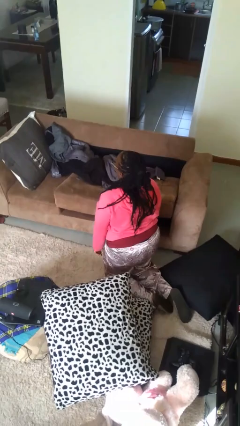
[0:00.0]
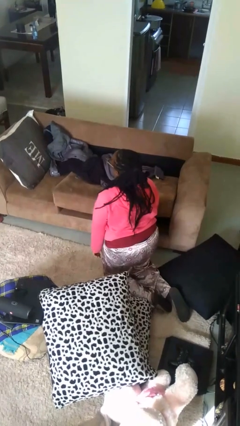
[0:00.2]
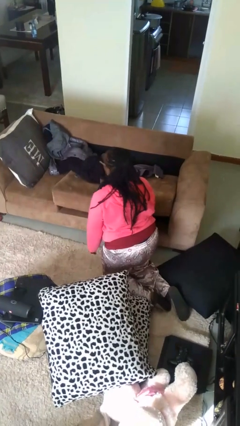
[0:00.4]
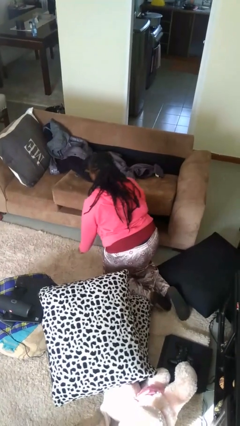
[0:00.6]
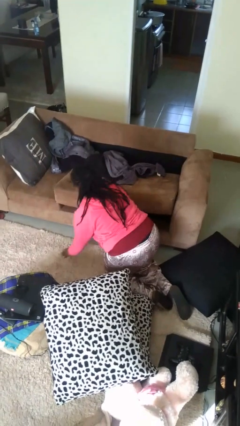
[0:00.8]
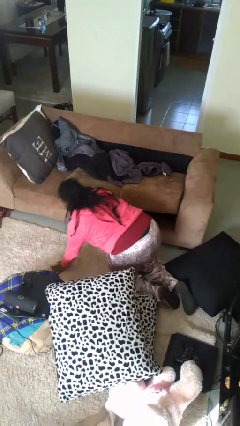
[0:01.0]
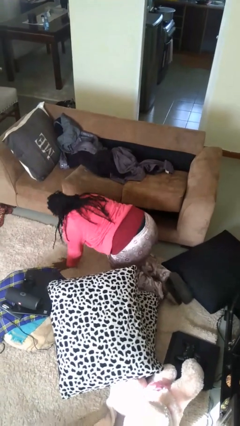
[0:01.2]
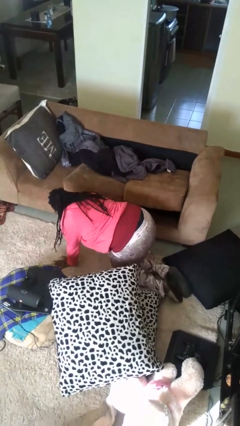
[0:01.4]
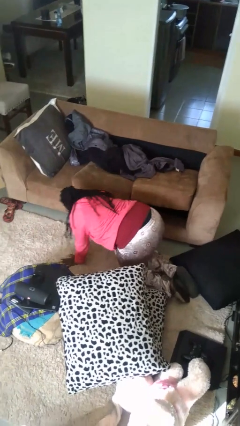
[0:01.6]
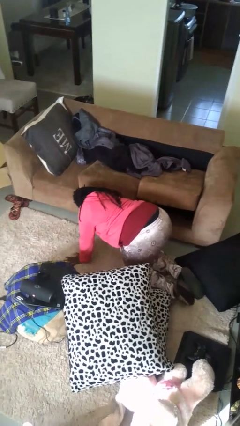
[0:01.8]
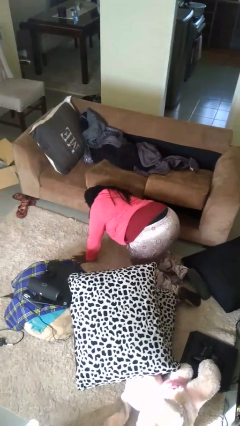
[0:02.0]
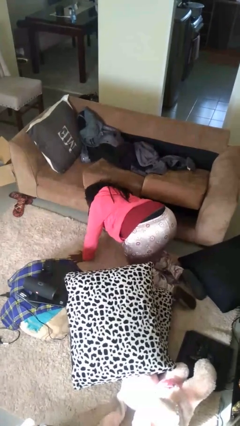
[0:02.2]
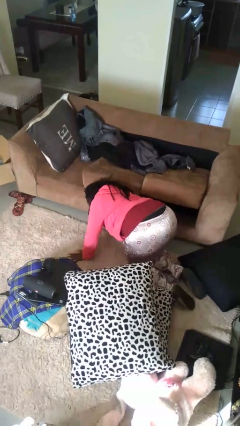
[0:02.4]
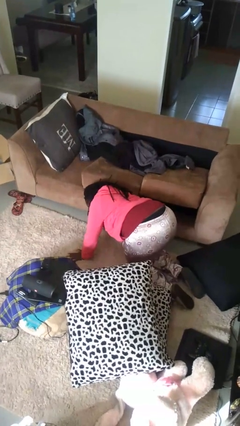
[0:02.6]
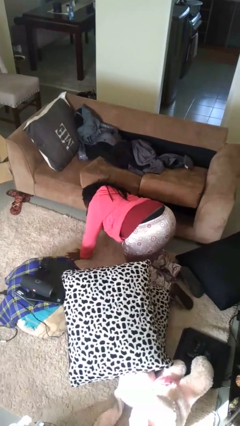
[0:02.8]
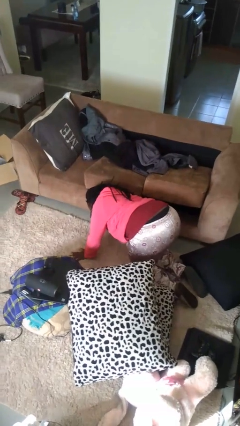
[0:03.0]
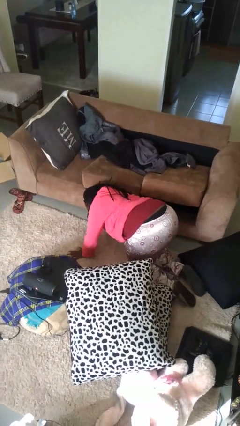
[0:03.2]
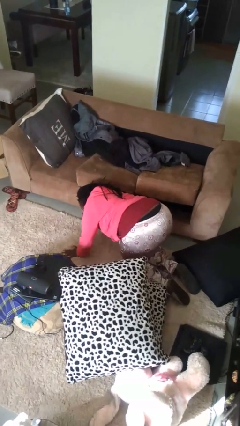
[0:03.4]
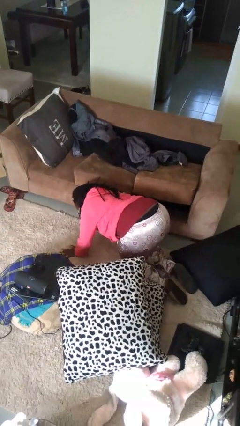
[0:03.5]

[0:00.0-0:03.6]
person searches under couch

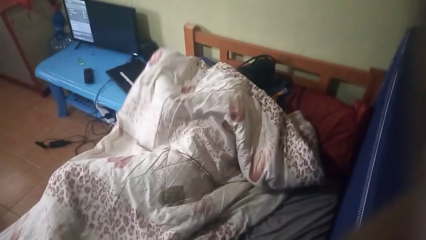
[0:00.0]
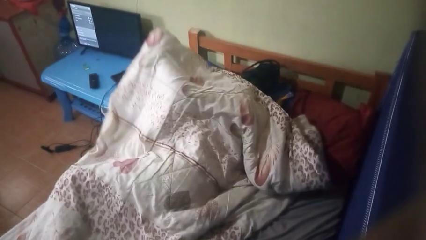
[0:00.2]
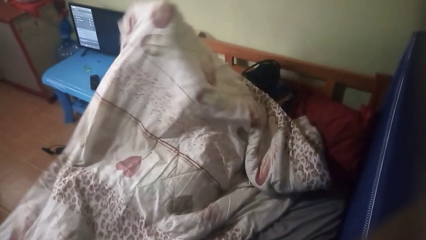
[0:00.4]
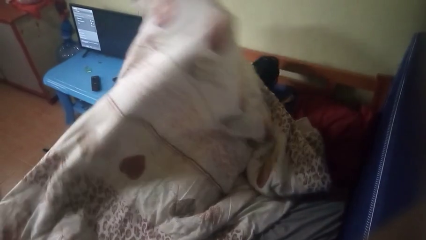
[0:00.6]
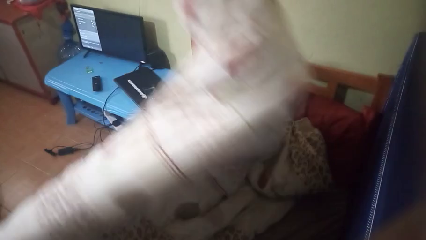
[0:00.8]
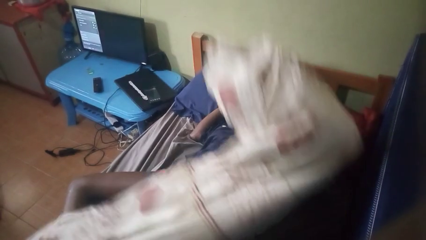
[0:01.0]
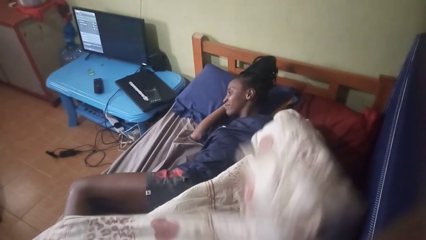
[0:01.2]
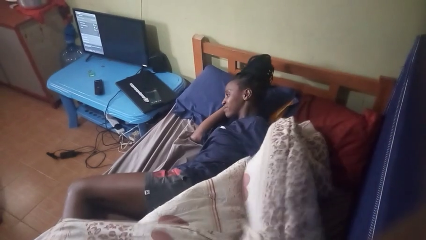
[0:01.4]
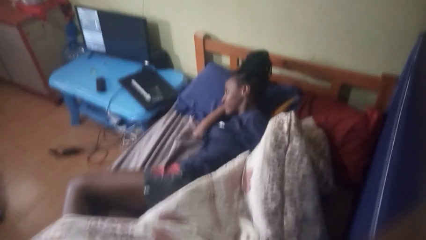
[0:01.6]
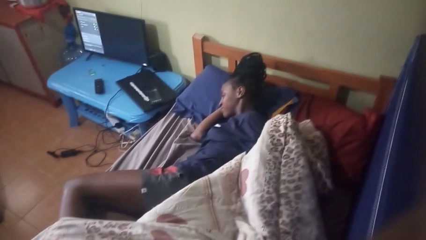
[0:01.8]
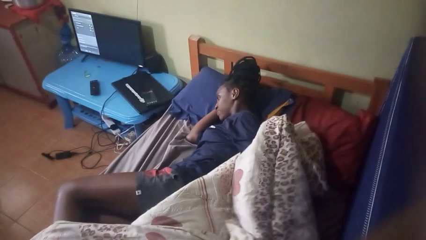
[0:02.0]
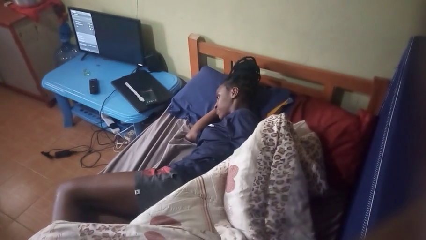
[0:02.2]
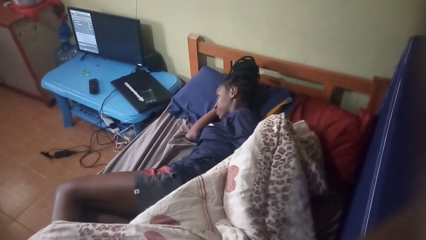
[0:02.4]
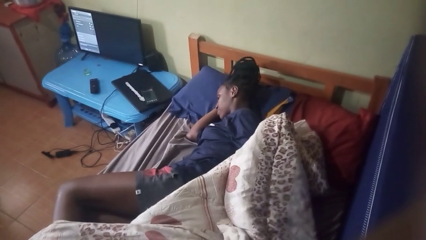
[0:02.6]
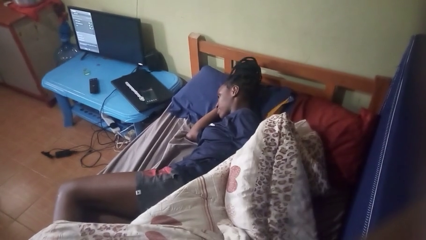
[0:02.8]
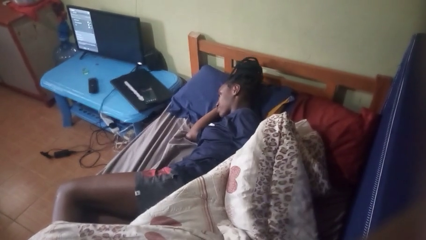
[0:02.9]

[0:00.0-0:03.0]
person uncovers with blanket

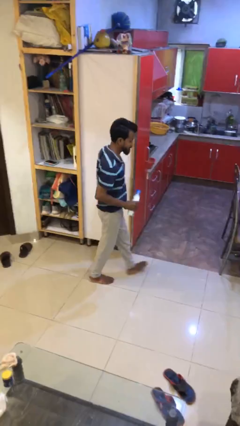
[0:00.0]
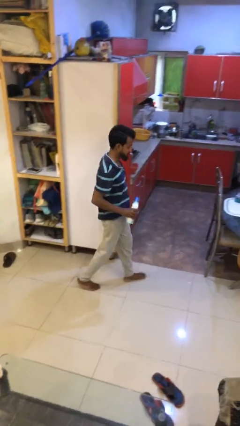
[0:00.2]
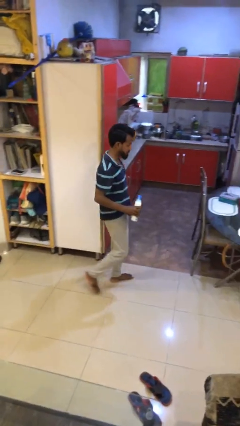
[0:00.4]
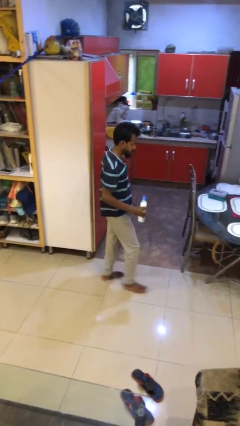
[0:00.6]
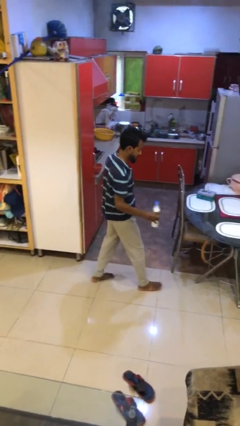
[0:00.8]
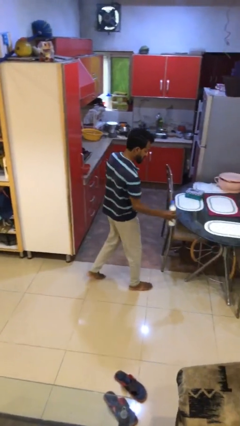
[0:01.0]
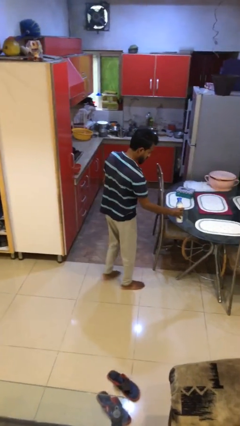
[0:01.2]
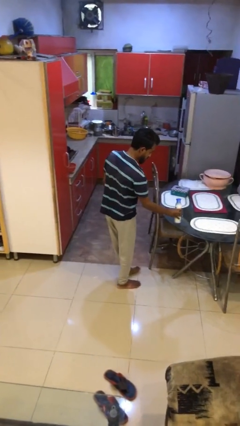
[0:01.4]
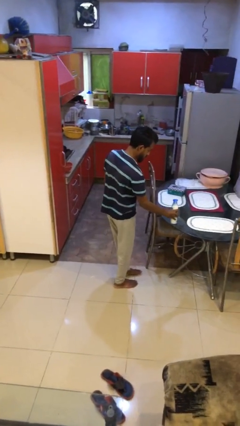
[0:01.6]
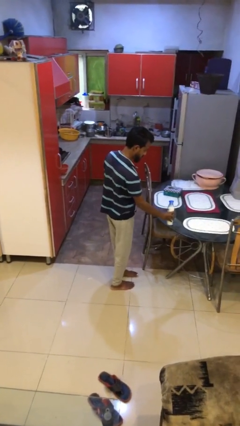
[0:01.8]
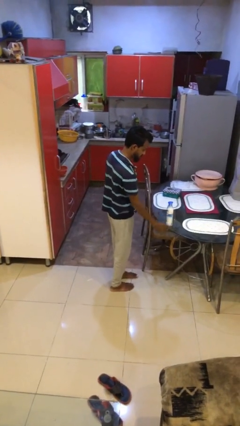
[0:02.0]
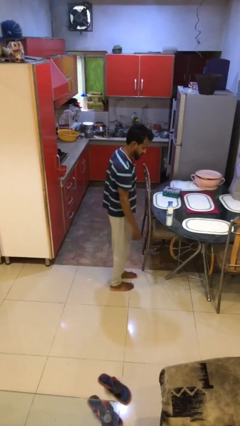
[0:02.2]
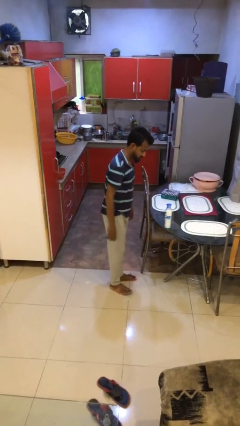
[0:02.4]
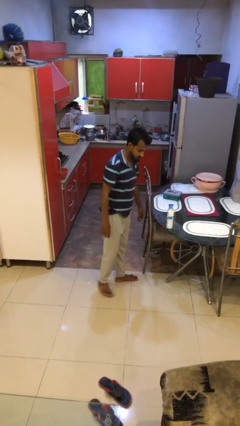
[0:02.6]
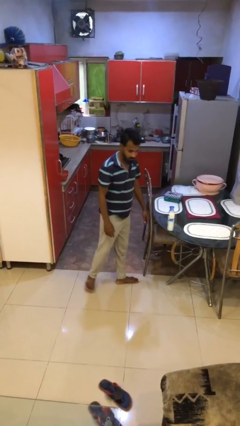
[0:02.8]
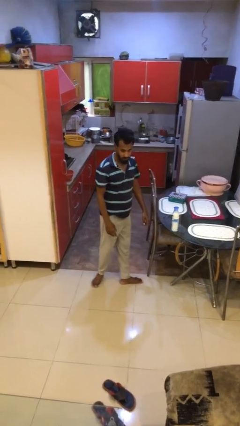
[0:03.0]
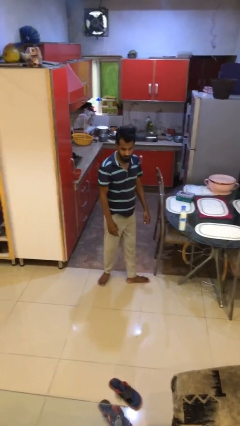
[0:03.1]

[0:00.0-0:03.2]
person puts down object on table

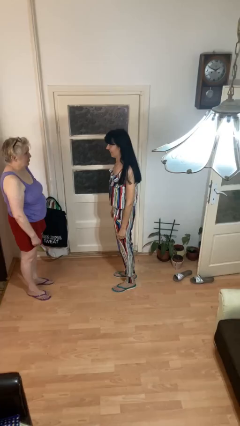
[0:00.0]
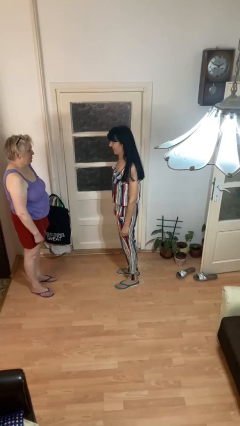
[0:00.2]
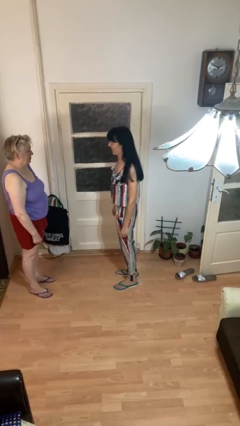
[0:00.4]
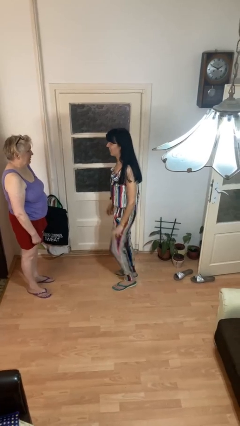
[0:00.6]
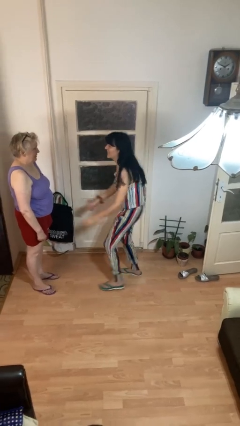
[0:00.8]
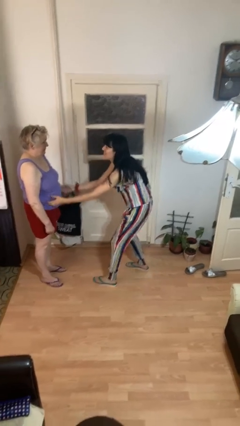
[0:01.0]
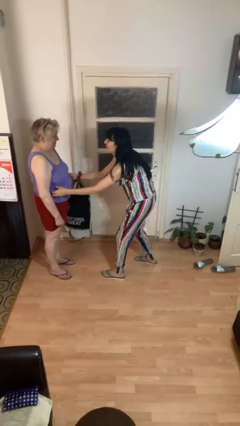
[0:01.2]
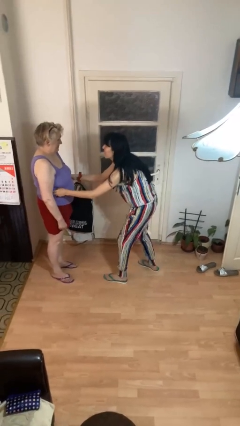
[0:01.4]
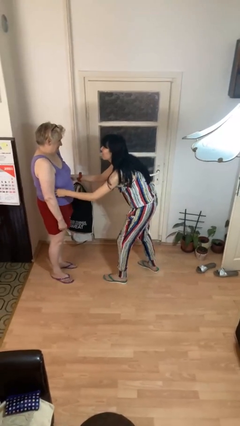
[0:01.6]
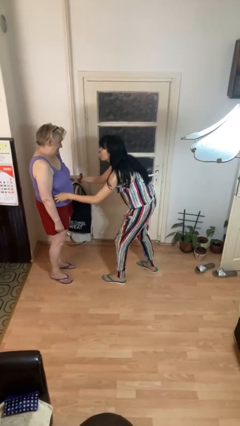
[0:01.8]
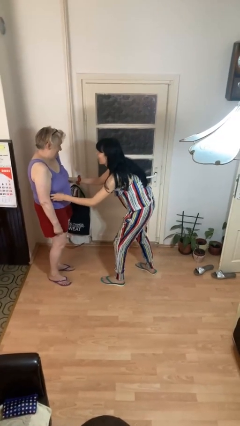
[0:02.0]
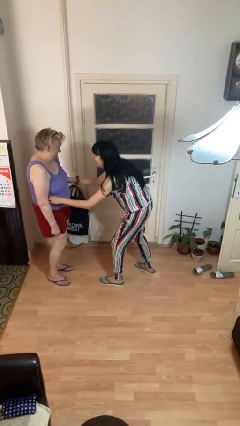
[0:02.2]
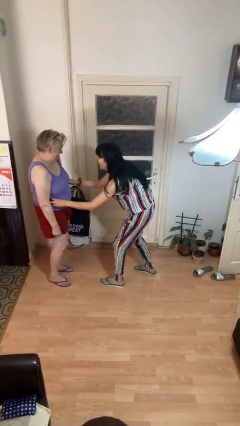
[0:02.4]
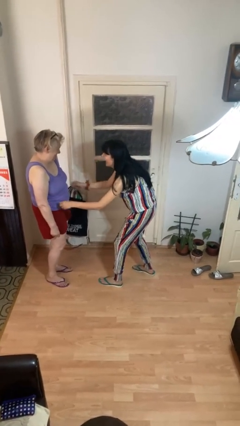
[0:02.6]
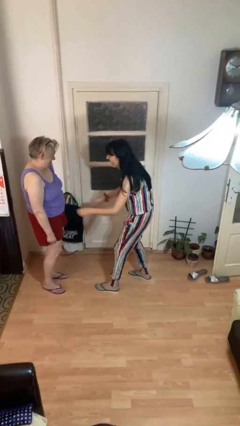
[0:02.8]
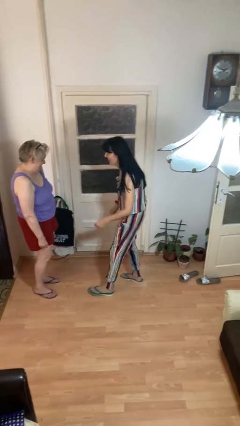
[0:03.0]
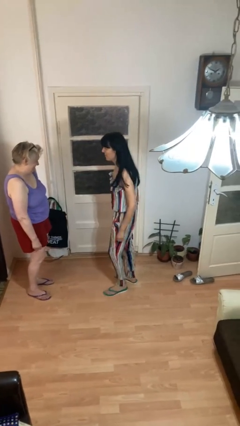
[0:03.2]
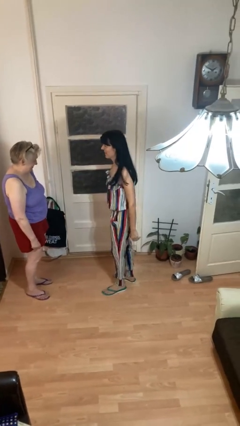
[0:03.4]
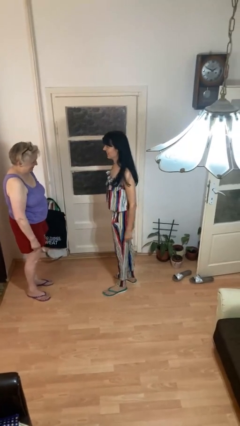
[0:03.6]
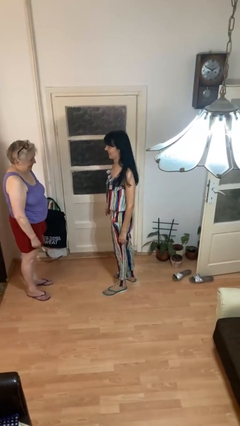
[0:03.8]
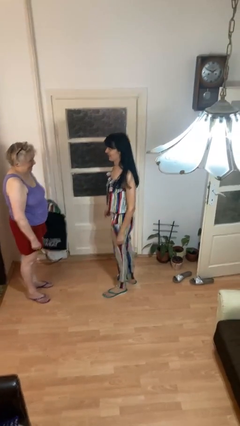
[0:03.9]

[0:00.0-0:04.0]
person tickles person

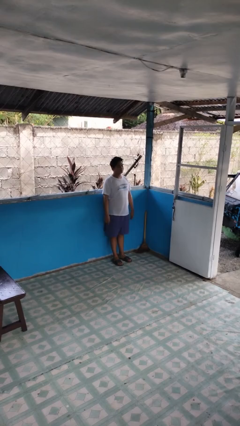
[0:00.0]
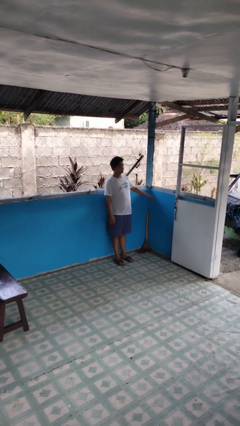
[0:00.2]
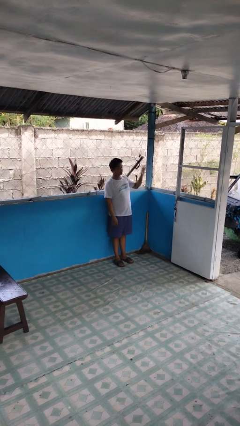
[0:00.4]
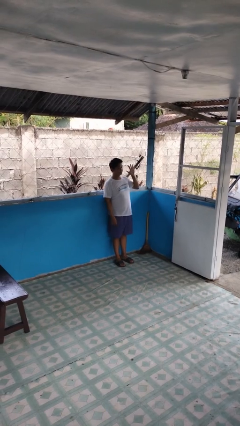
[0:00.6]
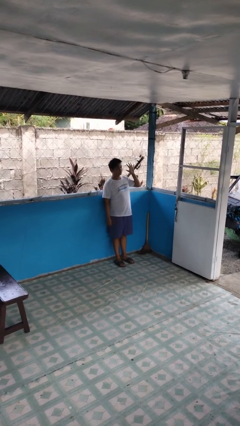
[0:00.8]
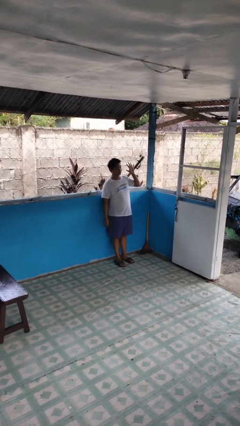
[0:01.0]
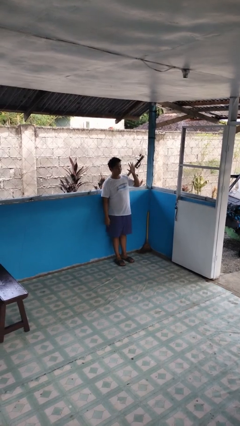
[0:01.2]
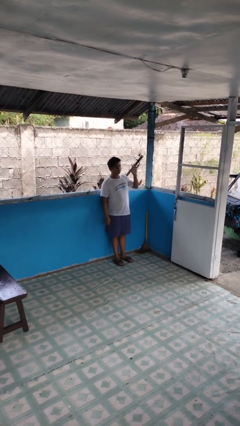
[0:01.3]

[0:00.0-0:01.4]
person gestures number five

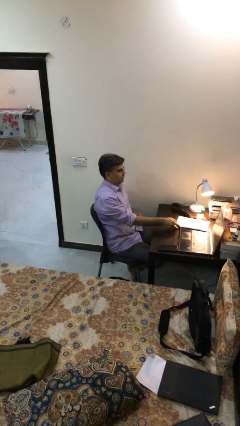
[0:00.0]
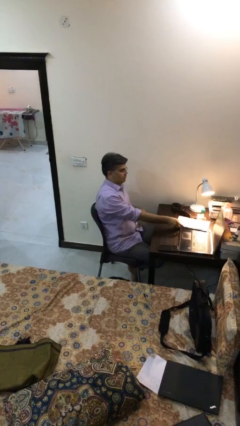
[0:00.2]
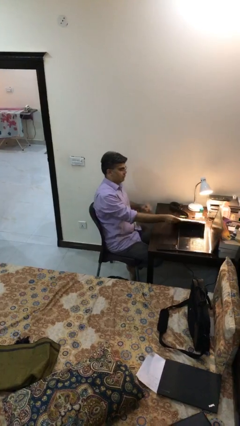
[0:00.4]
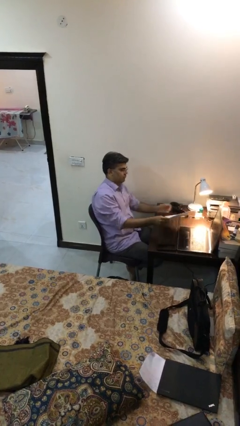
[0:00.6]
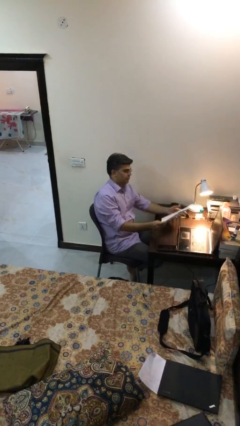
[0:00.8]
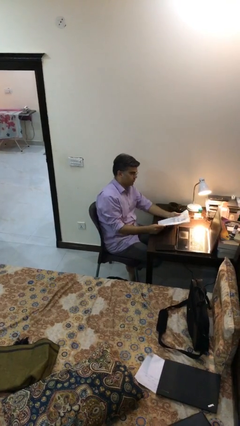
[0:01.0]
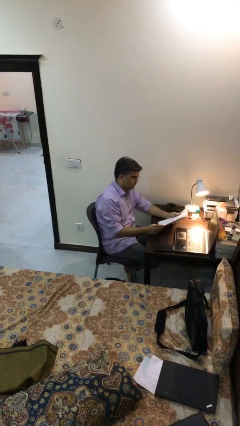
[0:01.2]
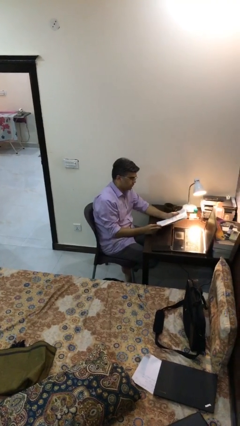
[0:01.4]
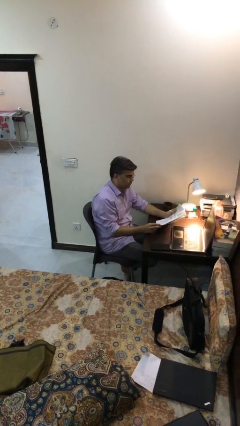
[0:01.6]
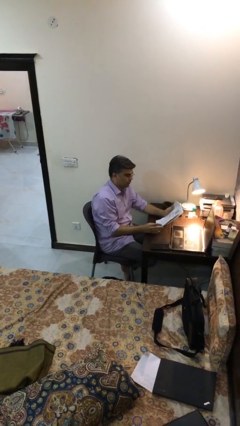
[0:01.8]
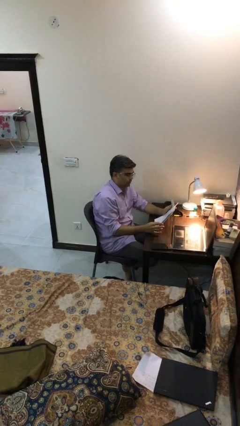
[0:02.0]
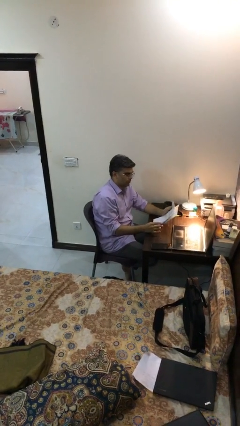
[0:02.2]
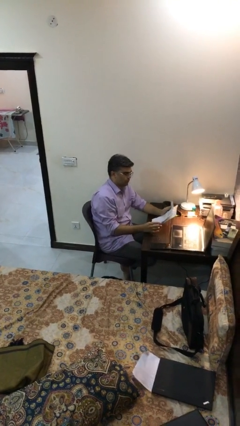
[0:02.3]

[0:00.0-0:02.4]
person picks up object from table
